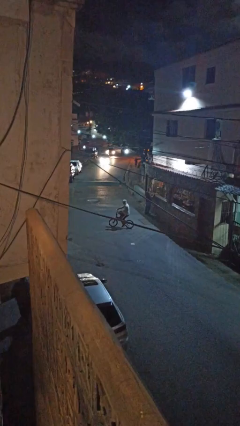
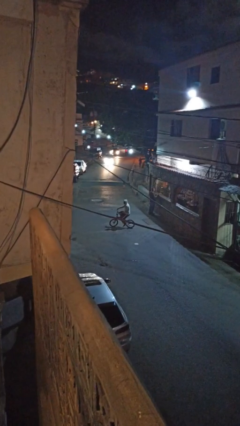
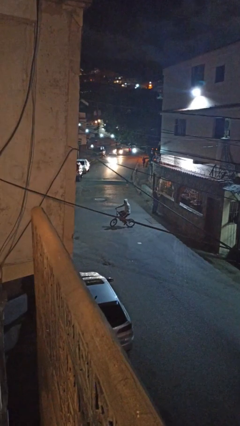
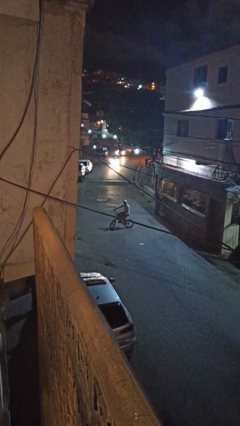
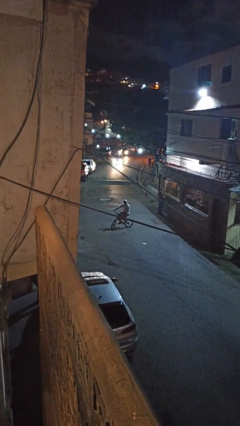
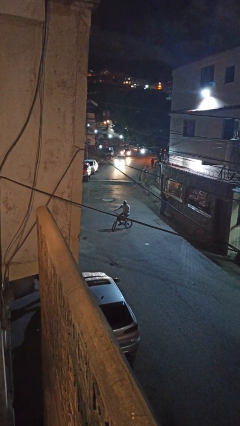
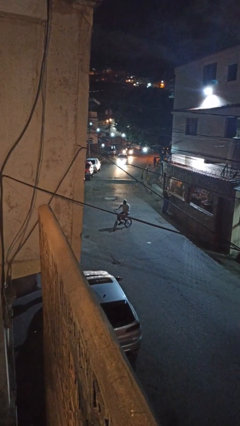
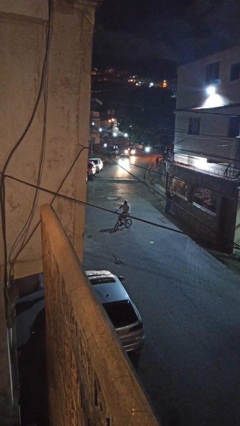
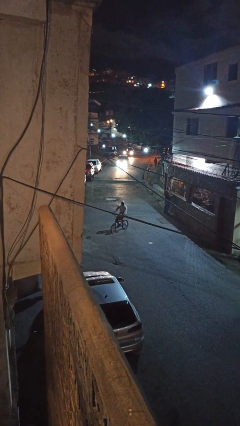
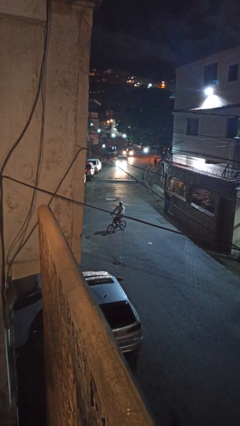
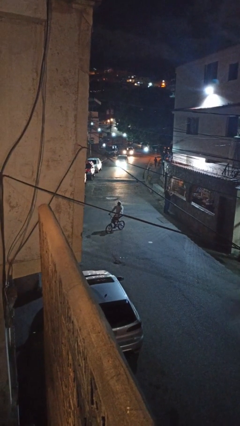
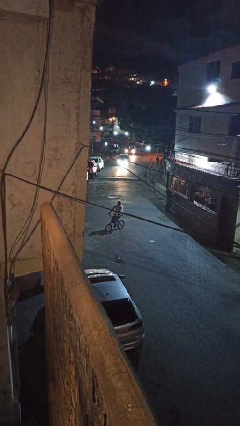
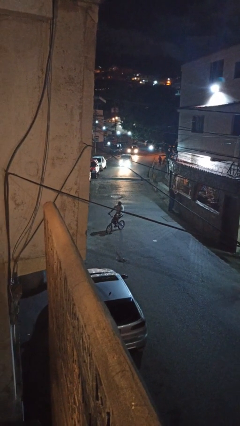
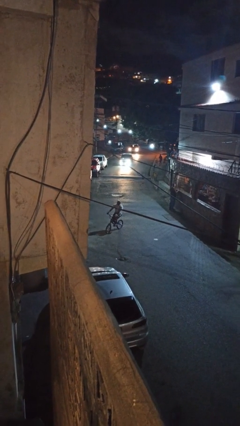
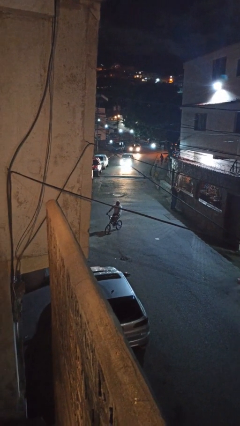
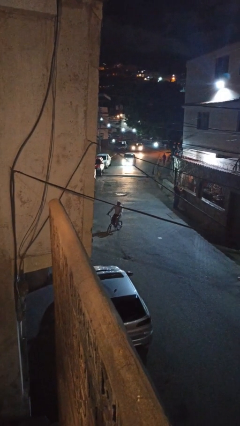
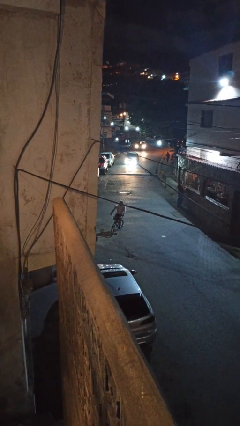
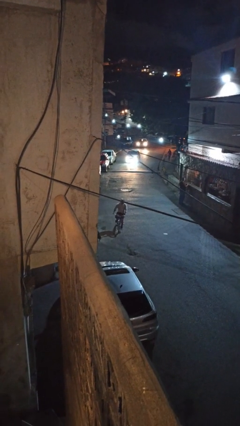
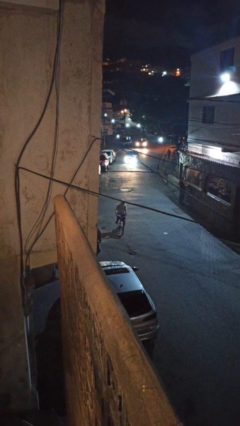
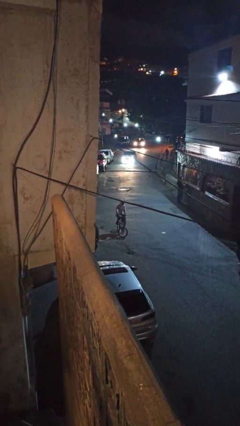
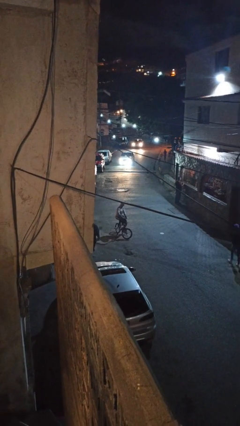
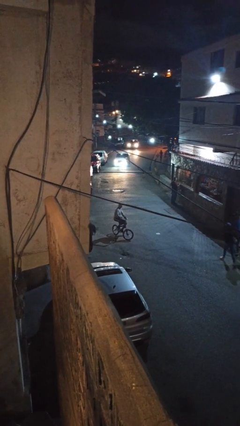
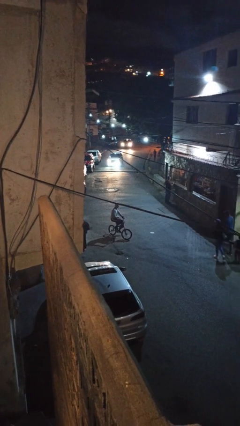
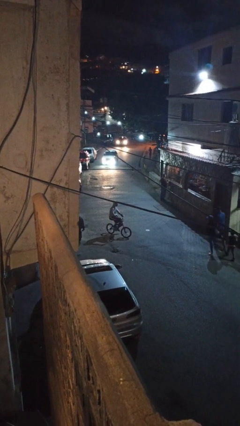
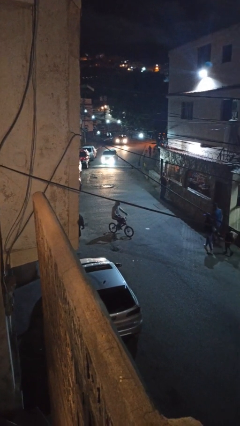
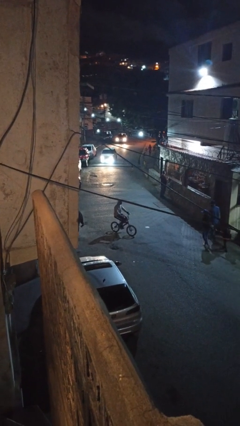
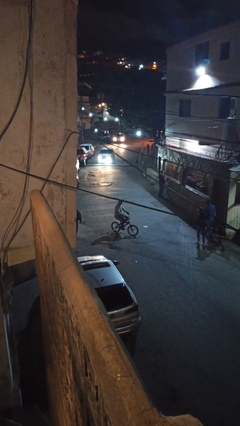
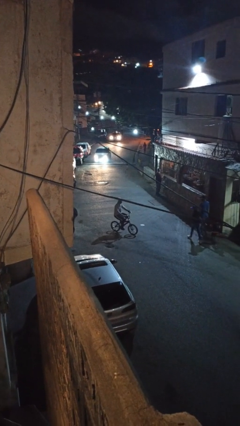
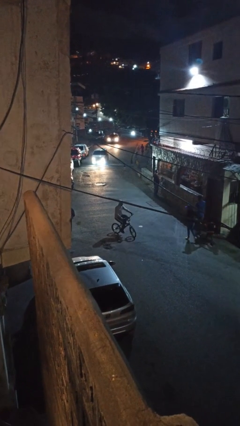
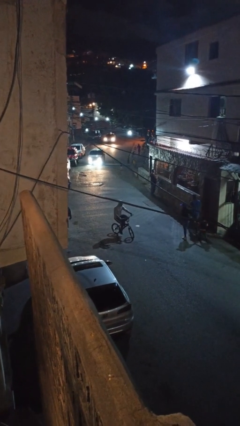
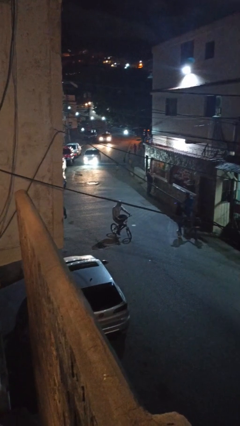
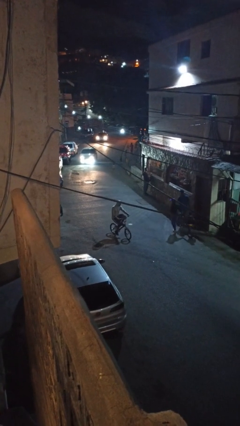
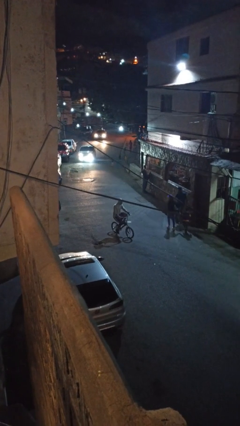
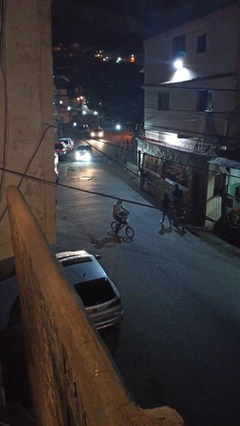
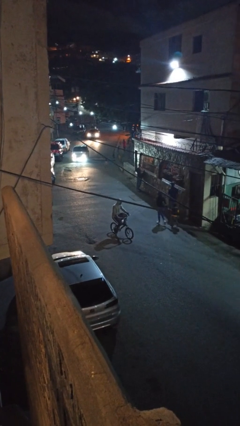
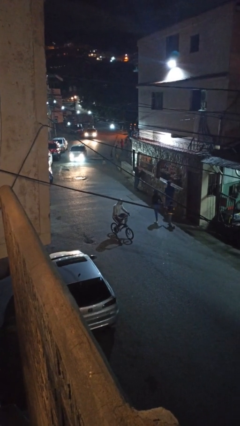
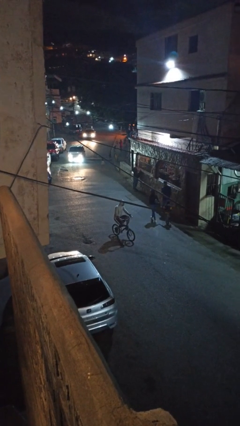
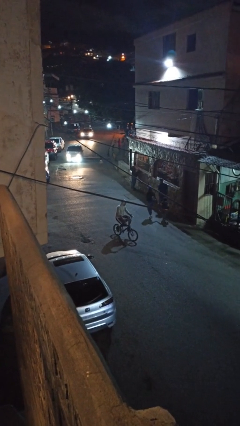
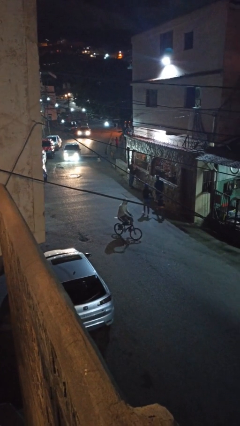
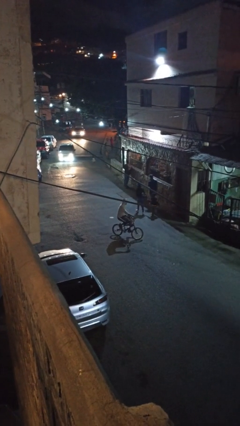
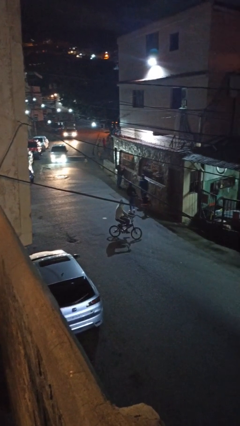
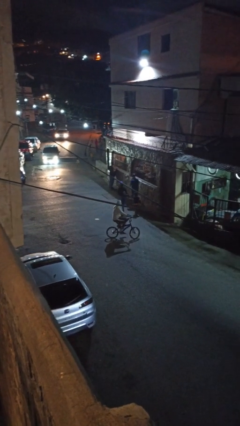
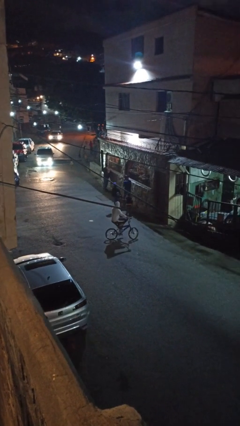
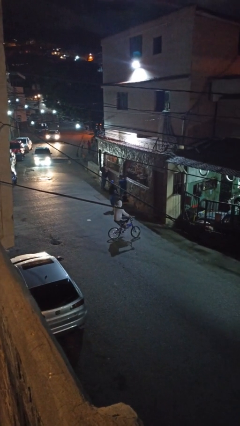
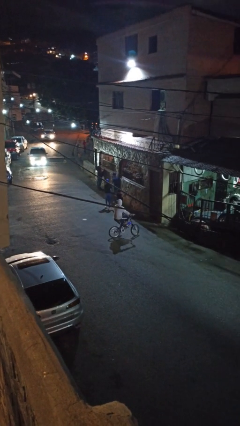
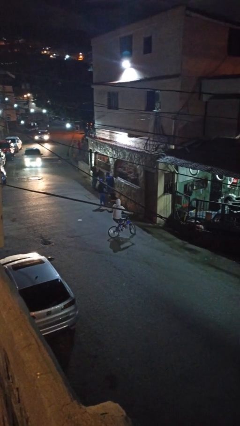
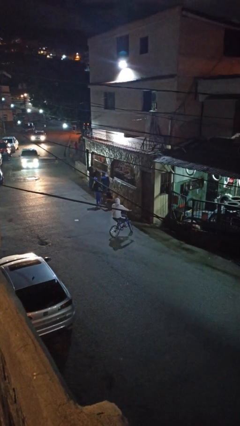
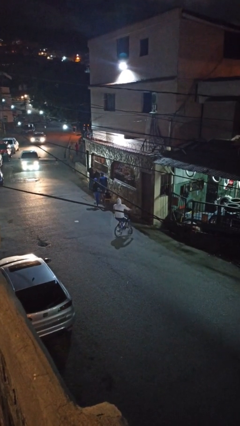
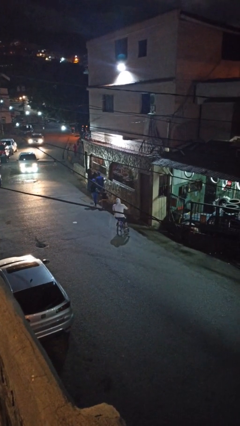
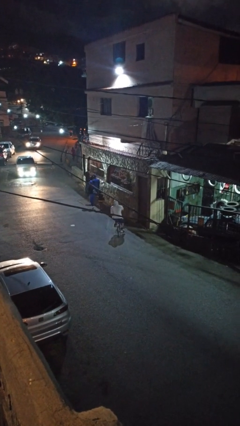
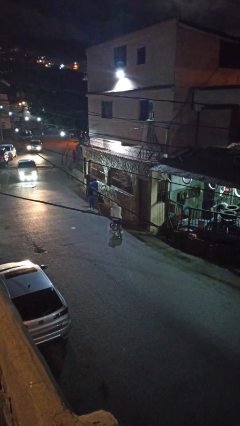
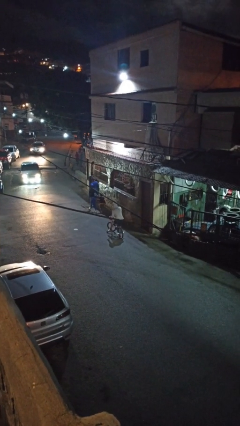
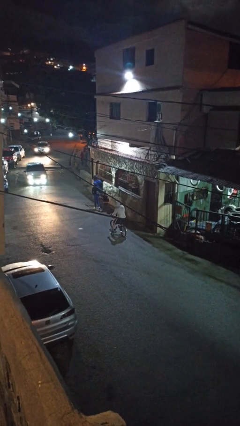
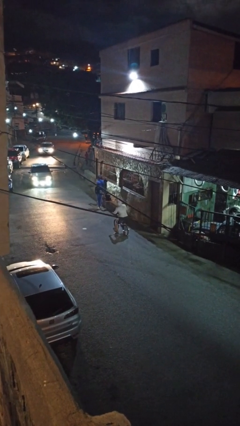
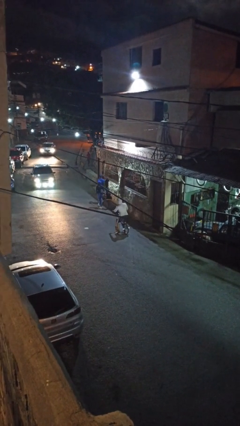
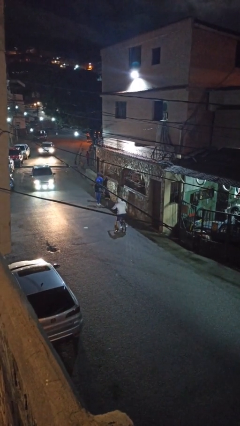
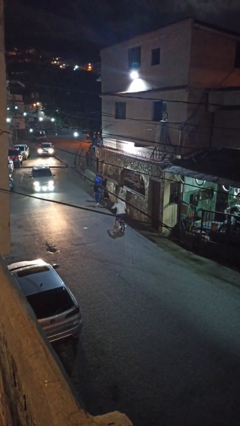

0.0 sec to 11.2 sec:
person rides bicycle

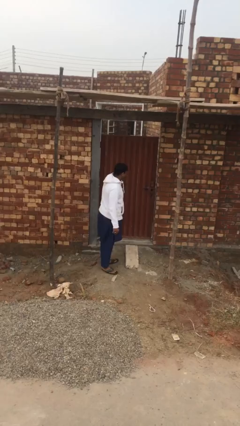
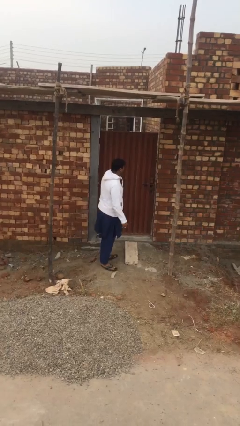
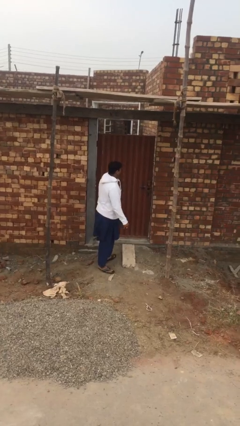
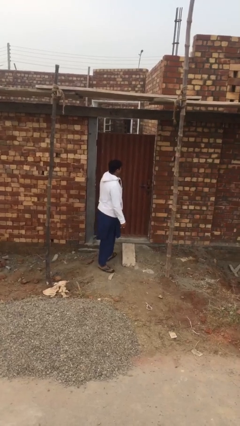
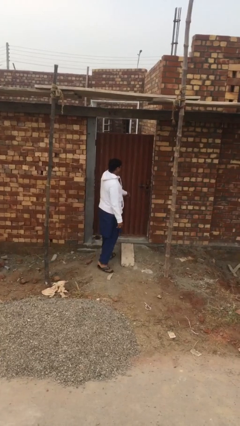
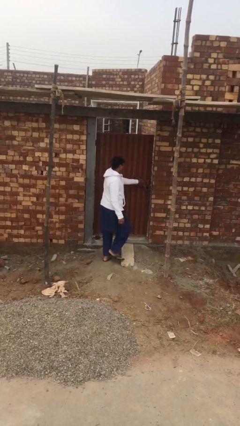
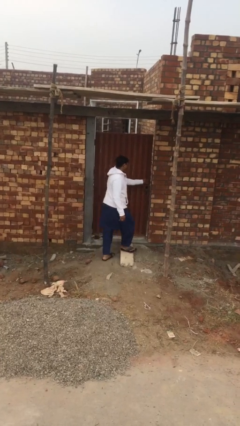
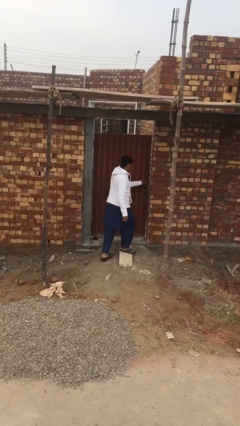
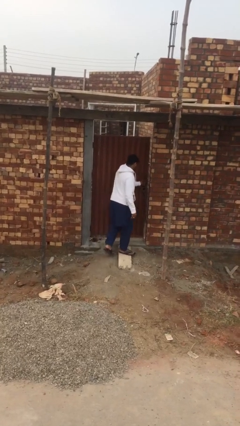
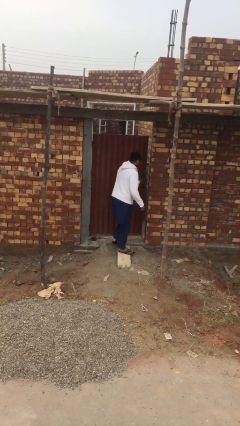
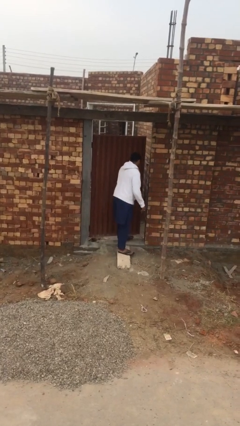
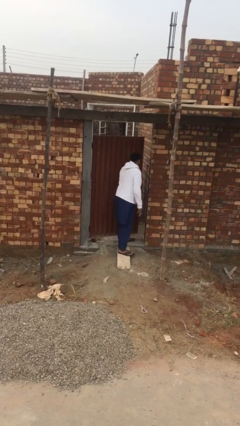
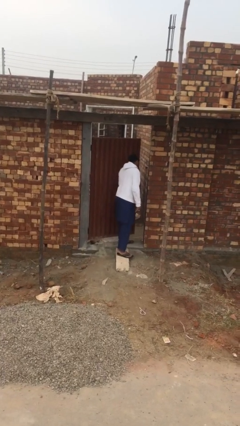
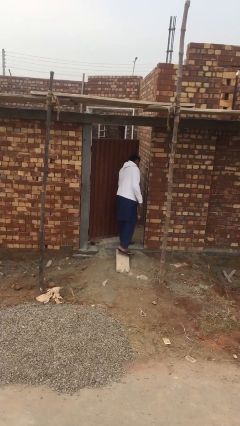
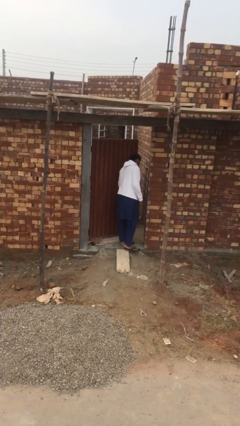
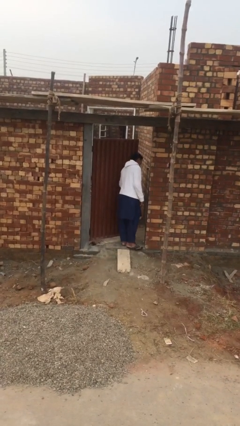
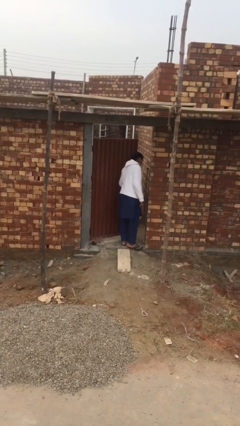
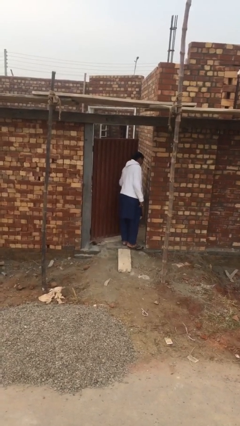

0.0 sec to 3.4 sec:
person opens facility door

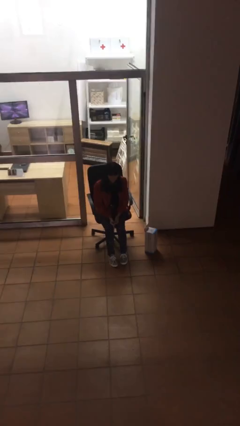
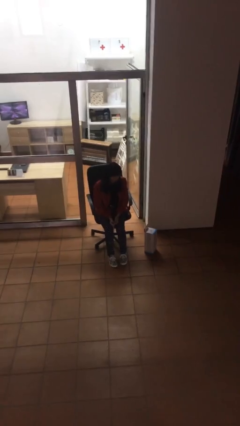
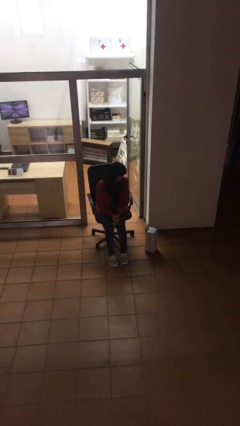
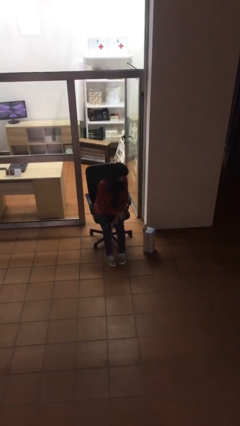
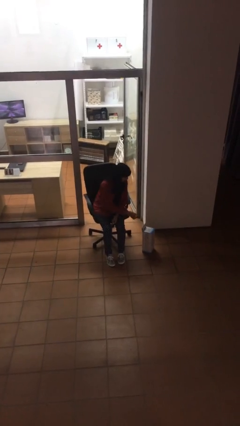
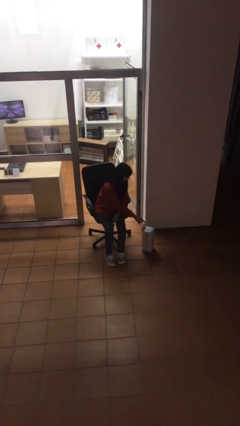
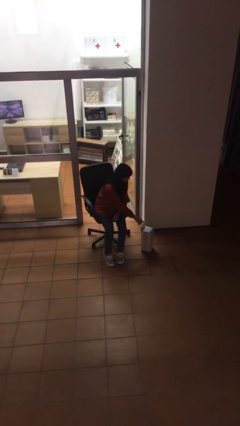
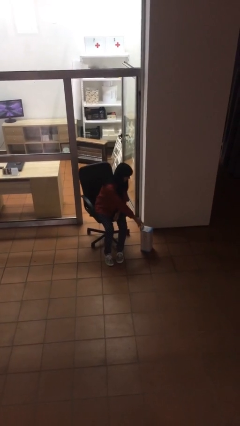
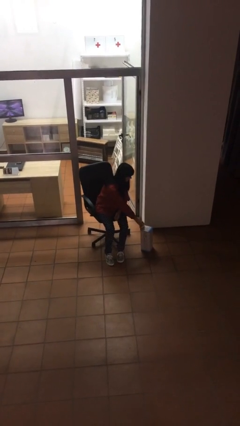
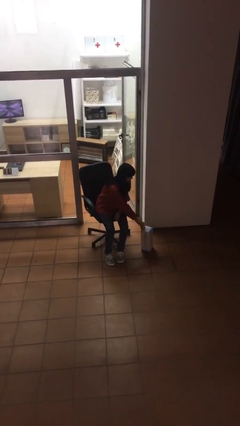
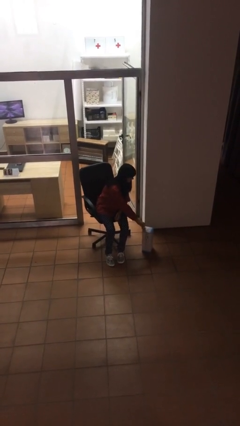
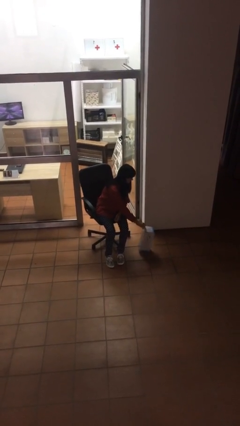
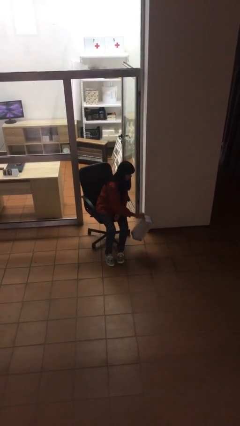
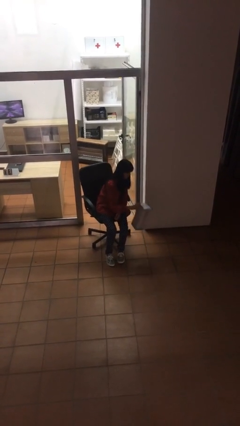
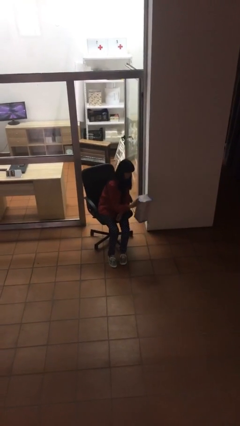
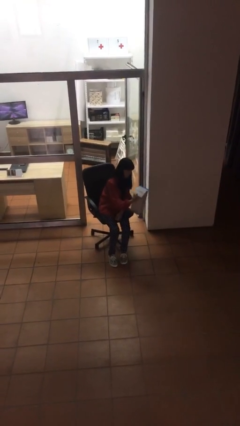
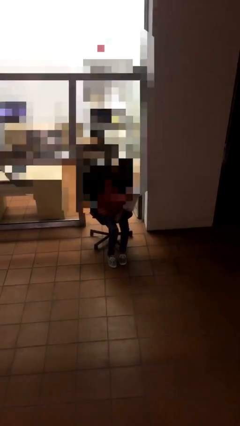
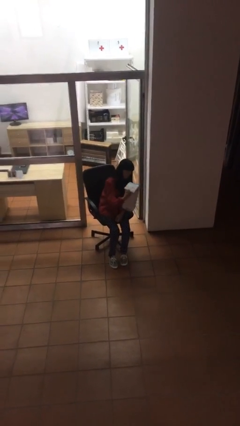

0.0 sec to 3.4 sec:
person picks up object from floor

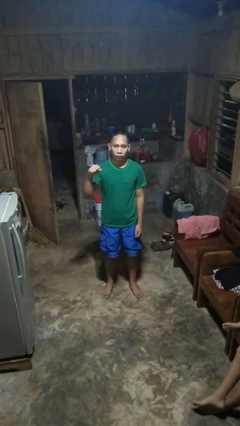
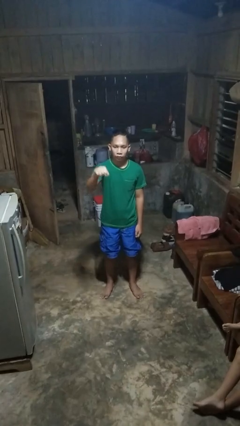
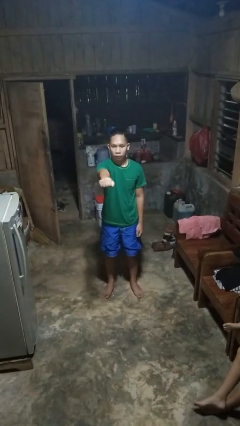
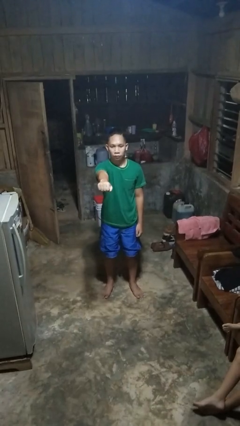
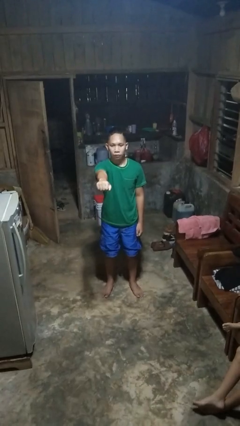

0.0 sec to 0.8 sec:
person punches
